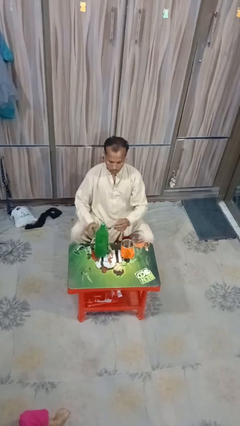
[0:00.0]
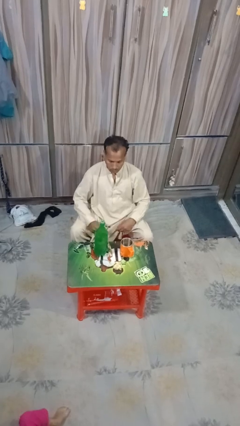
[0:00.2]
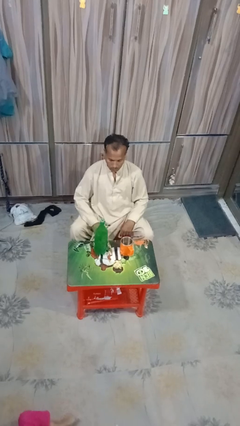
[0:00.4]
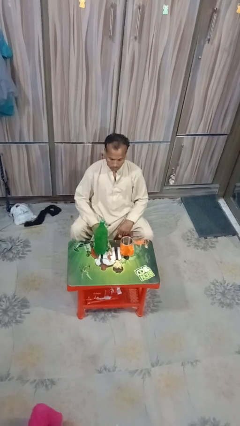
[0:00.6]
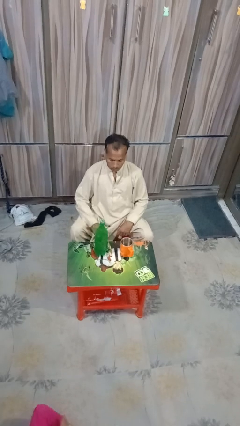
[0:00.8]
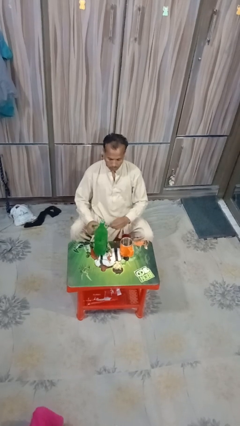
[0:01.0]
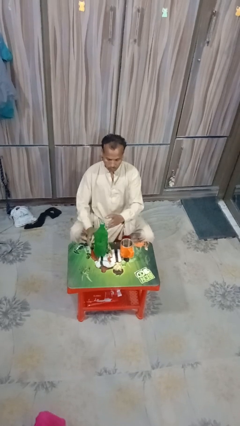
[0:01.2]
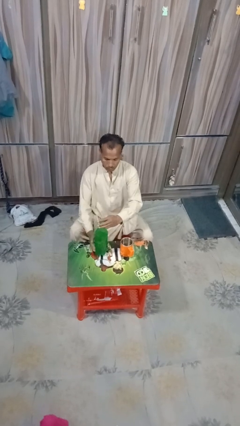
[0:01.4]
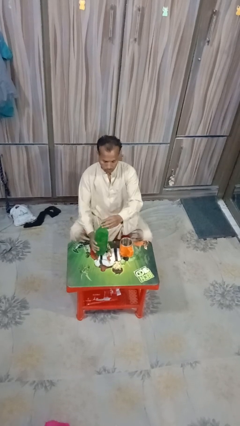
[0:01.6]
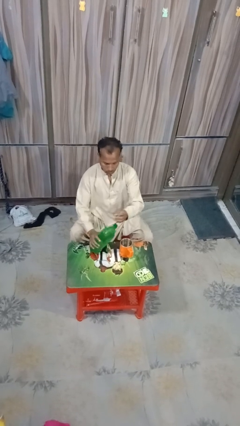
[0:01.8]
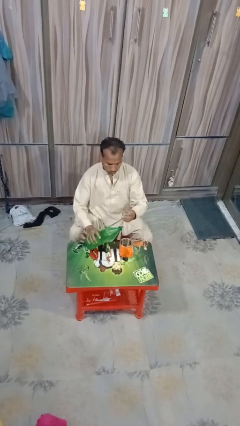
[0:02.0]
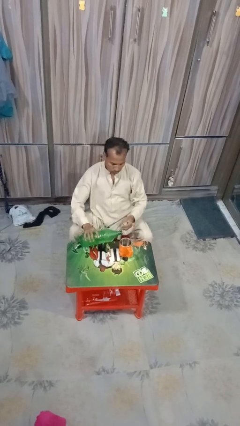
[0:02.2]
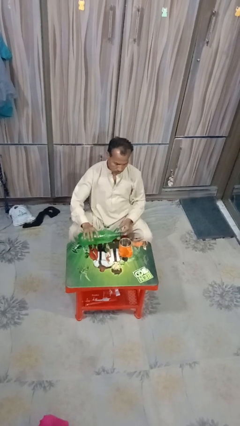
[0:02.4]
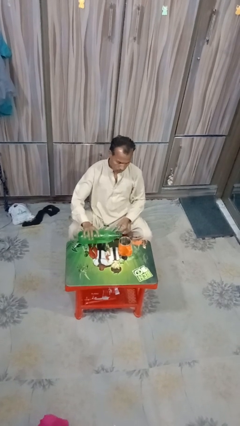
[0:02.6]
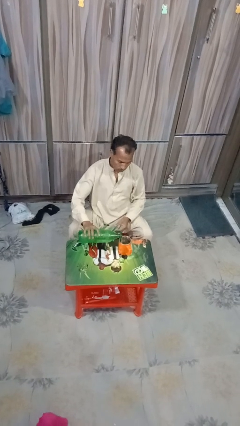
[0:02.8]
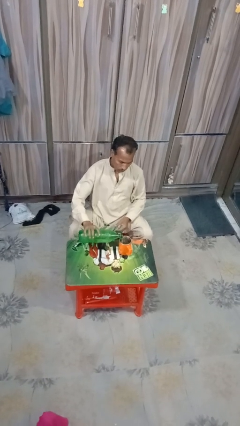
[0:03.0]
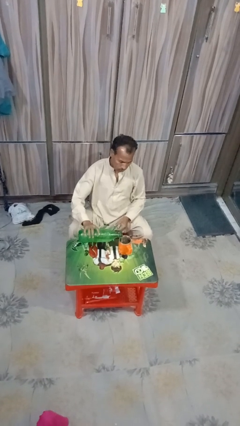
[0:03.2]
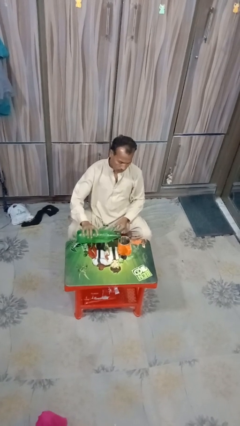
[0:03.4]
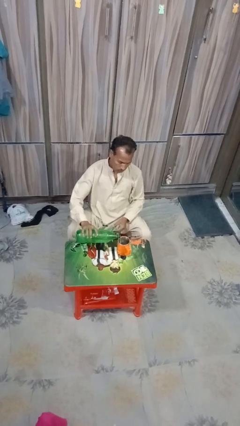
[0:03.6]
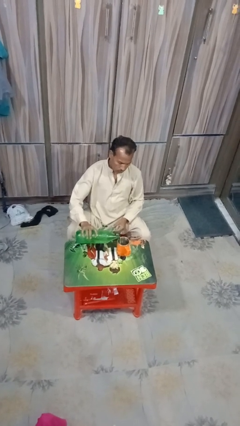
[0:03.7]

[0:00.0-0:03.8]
person pours liquid into cup

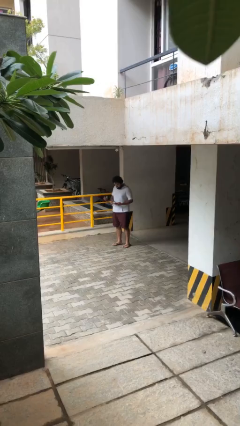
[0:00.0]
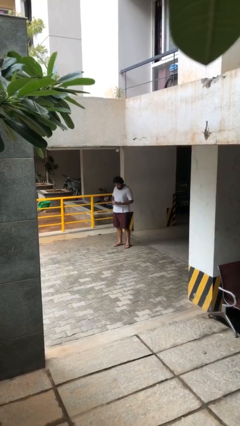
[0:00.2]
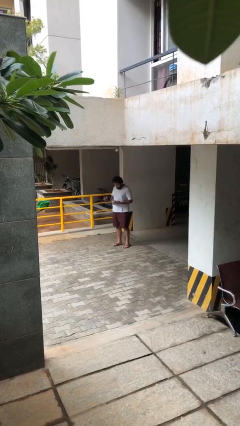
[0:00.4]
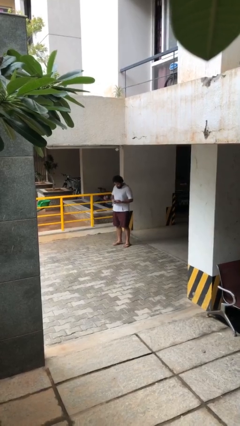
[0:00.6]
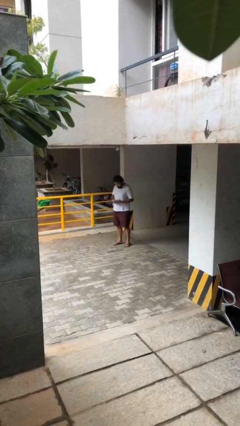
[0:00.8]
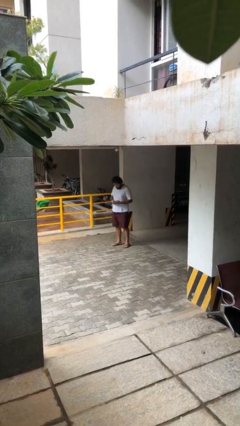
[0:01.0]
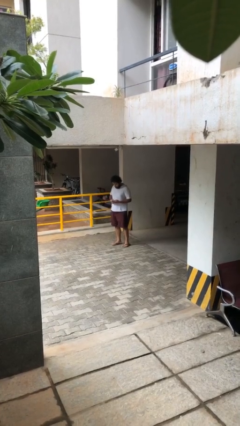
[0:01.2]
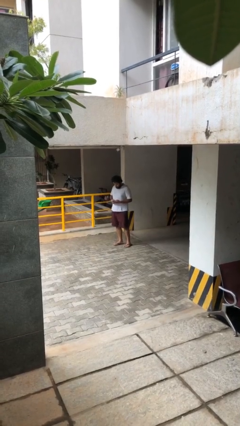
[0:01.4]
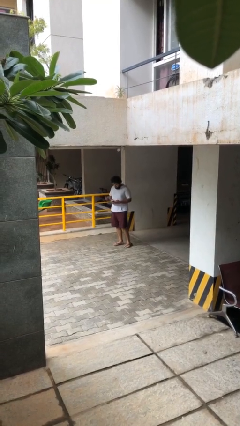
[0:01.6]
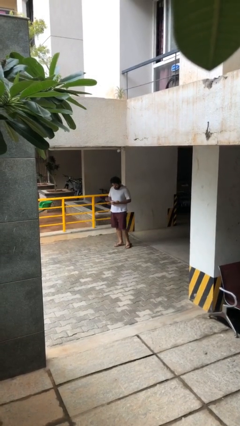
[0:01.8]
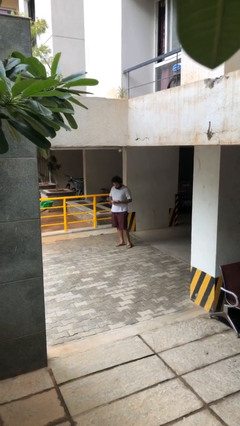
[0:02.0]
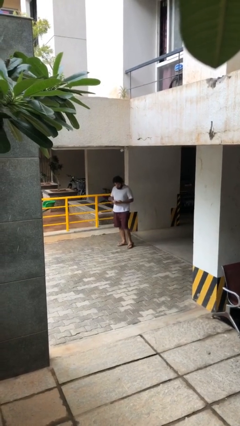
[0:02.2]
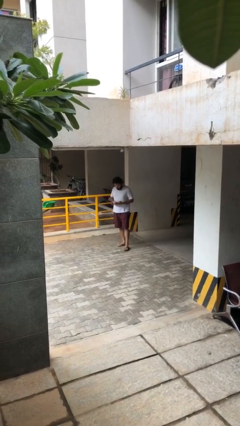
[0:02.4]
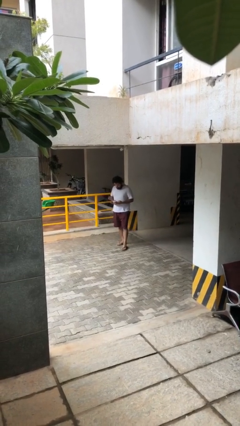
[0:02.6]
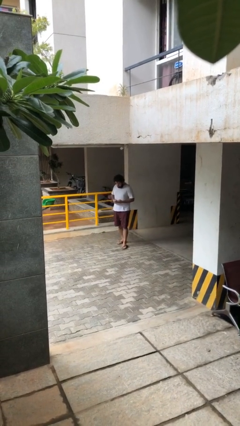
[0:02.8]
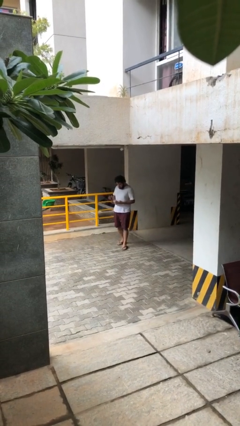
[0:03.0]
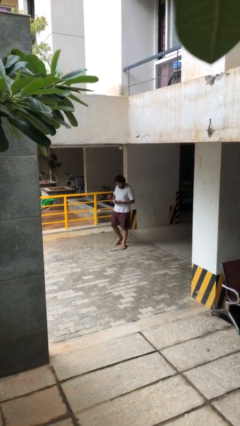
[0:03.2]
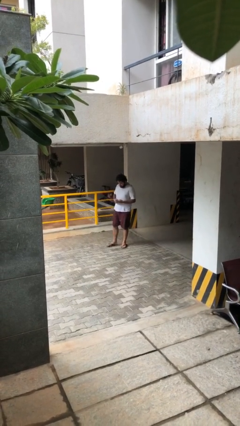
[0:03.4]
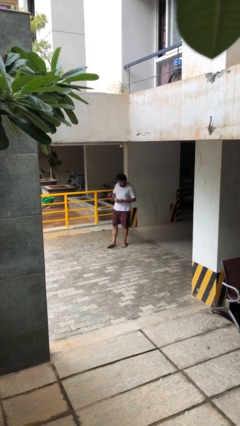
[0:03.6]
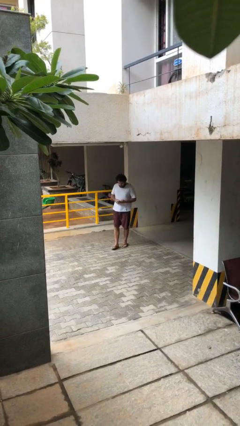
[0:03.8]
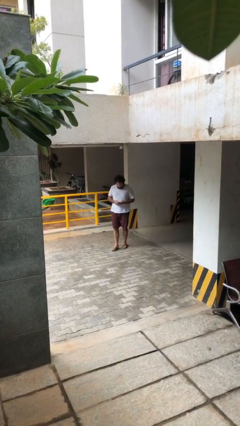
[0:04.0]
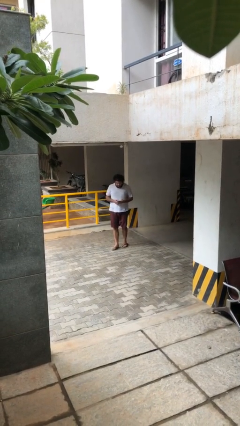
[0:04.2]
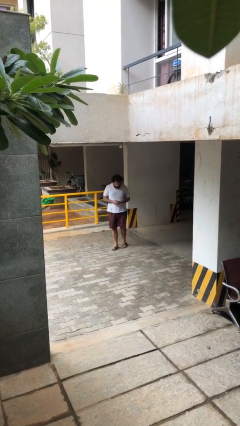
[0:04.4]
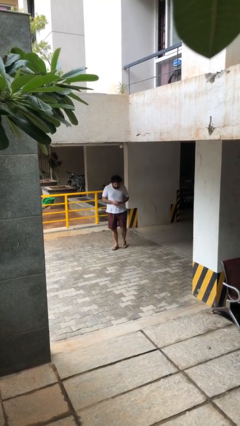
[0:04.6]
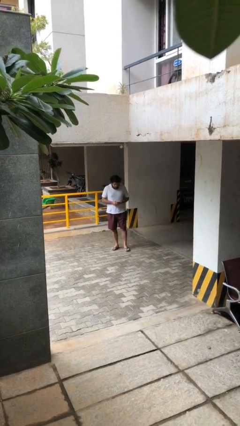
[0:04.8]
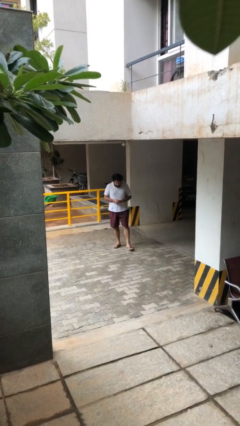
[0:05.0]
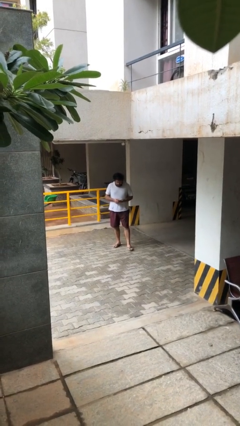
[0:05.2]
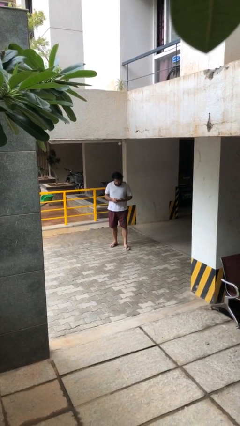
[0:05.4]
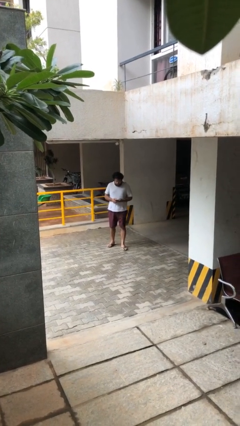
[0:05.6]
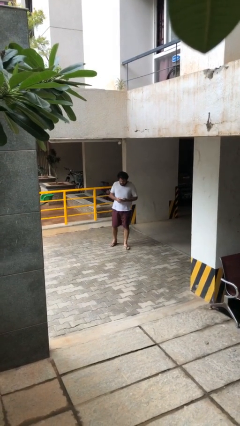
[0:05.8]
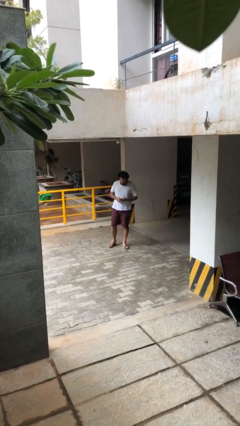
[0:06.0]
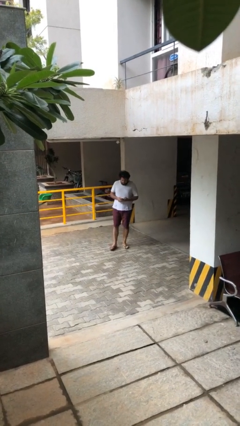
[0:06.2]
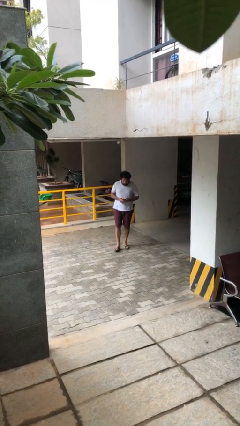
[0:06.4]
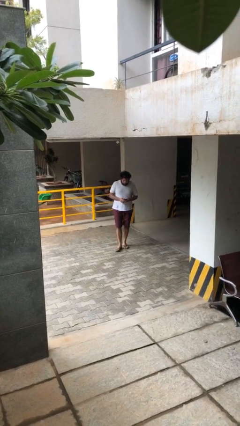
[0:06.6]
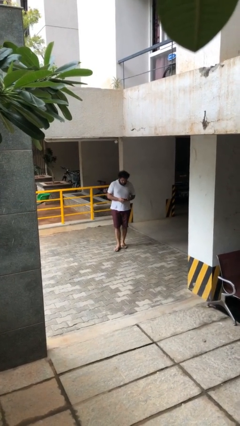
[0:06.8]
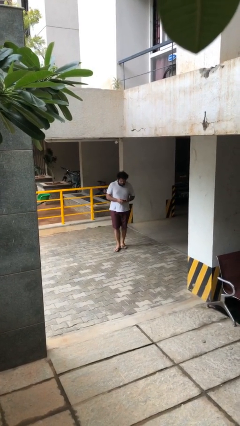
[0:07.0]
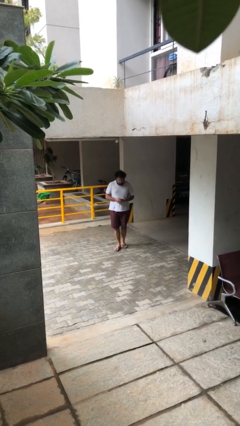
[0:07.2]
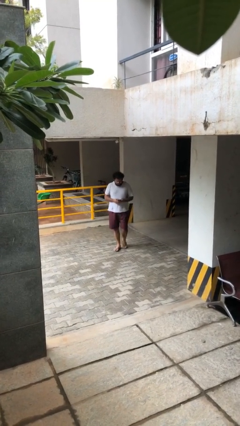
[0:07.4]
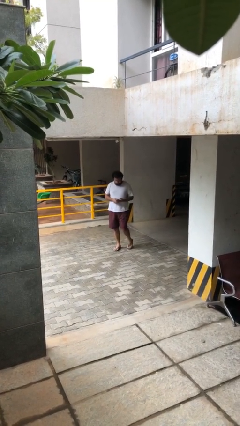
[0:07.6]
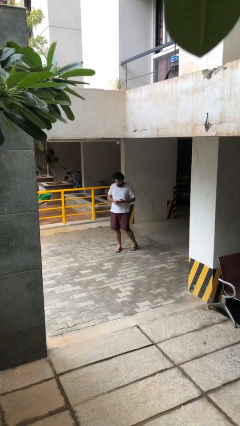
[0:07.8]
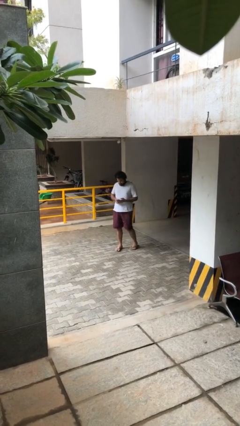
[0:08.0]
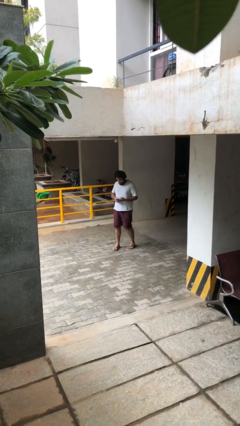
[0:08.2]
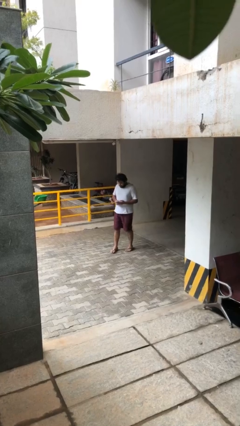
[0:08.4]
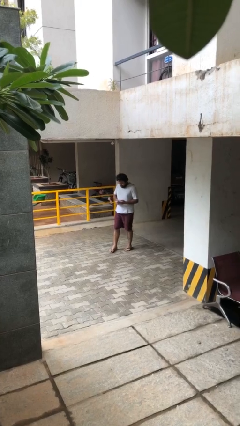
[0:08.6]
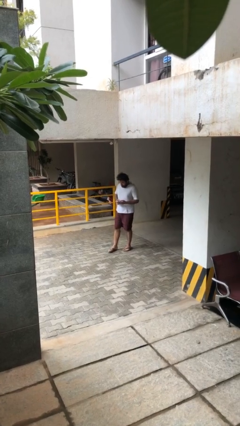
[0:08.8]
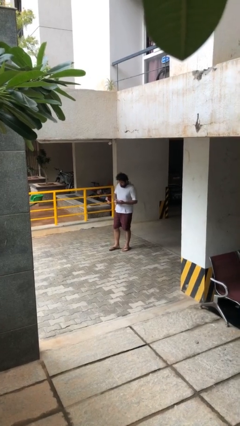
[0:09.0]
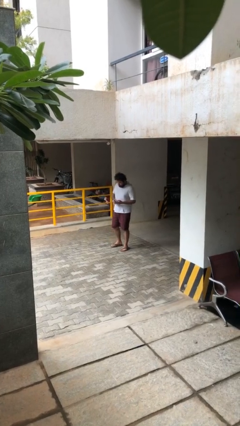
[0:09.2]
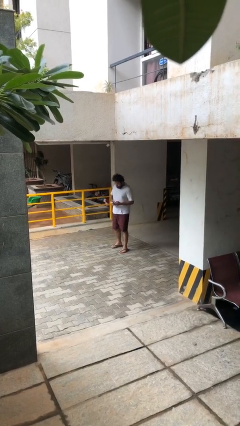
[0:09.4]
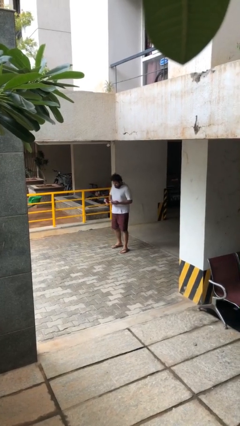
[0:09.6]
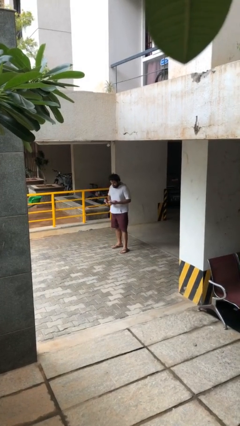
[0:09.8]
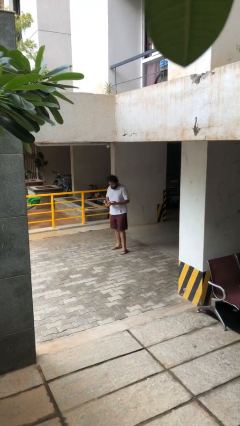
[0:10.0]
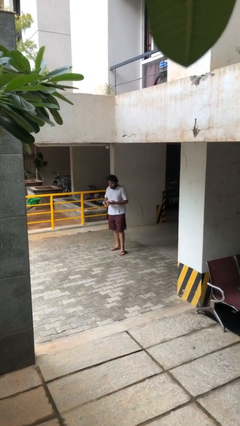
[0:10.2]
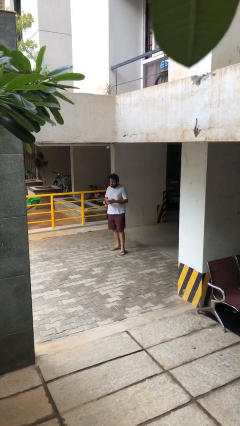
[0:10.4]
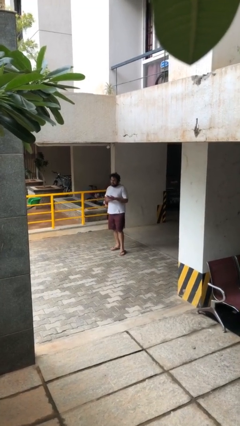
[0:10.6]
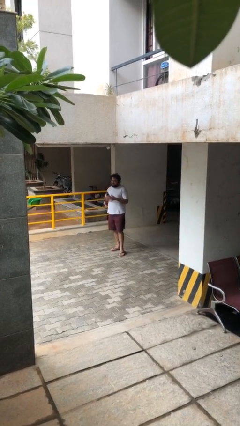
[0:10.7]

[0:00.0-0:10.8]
person texts on phone

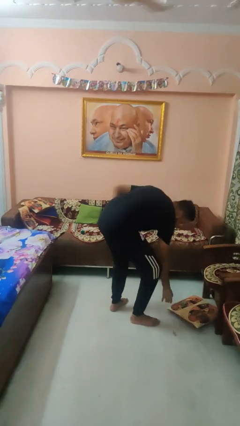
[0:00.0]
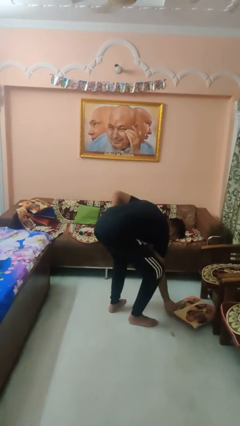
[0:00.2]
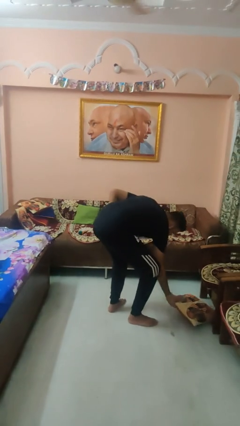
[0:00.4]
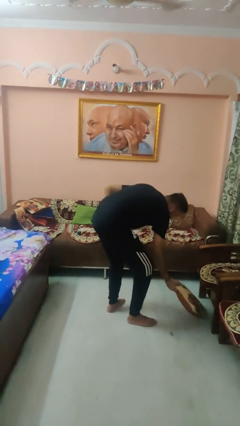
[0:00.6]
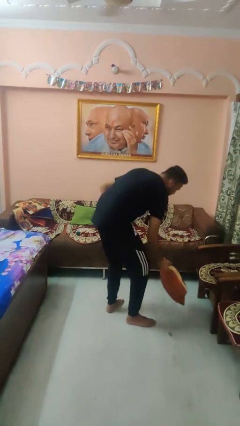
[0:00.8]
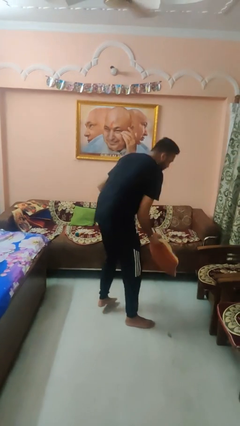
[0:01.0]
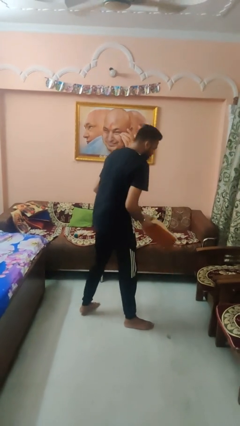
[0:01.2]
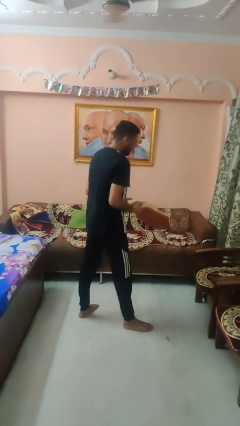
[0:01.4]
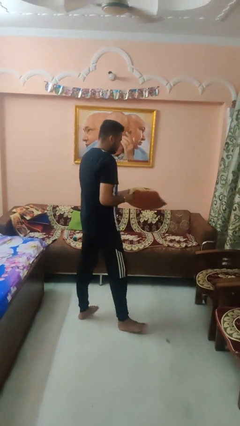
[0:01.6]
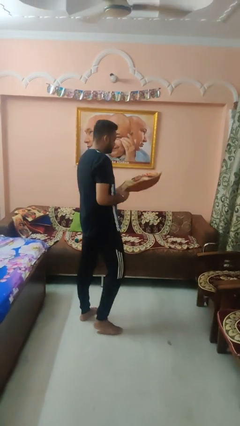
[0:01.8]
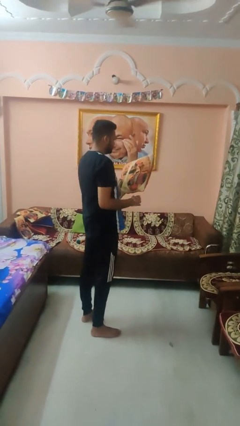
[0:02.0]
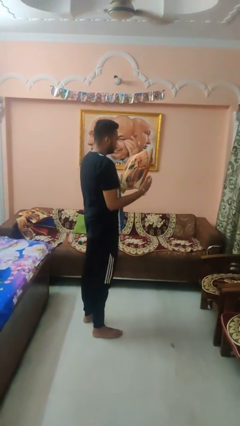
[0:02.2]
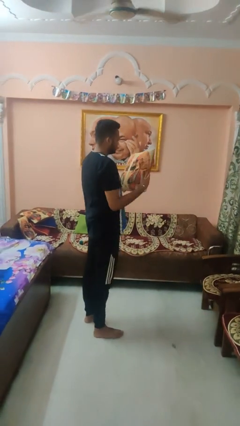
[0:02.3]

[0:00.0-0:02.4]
person picks up object from floor

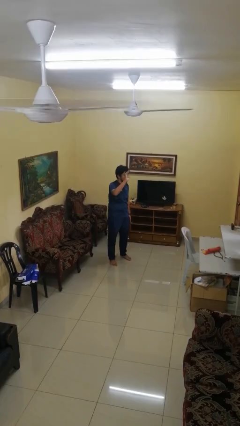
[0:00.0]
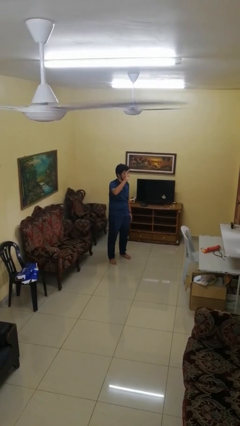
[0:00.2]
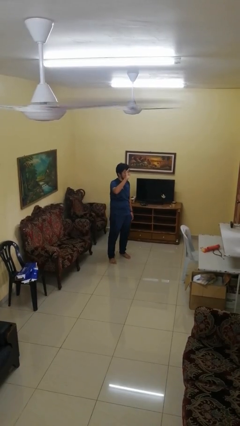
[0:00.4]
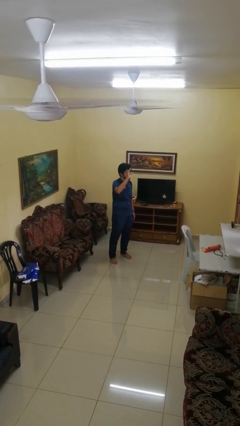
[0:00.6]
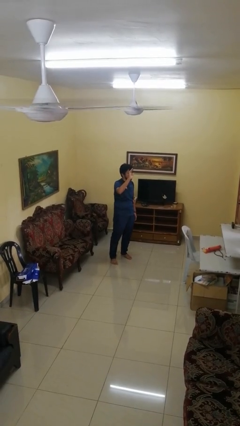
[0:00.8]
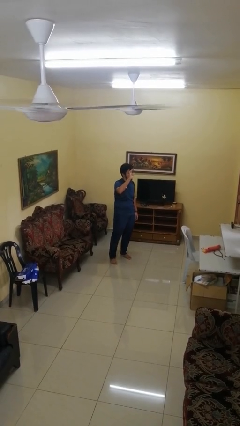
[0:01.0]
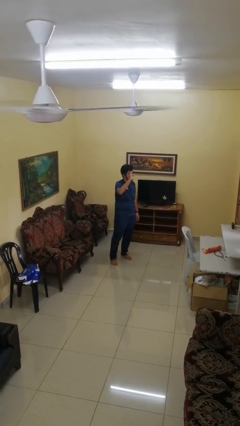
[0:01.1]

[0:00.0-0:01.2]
person gestures lower hand
